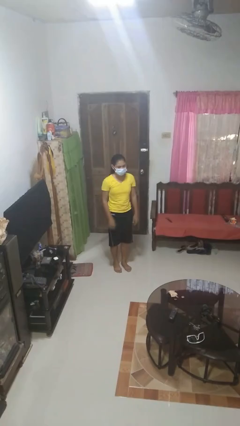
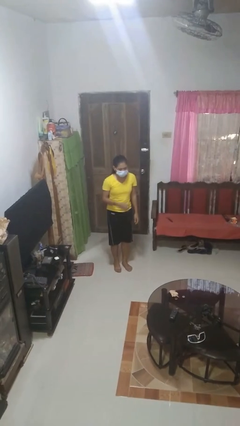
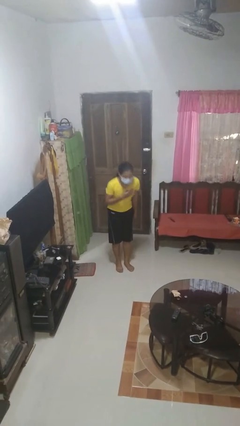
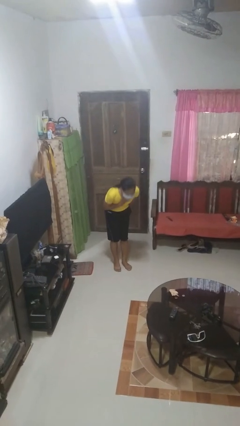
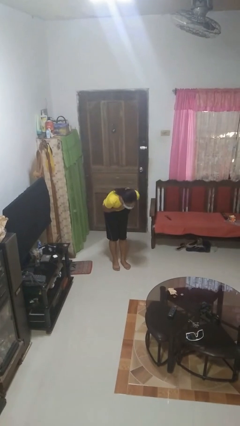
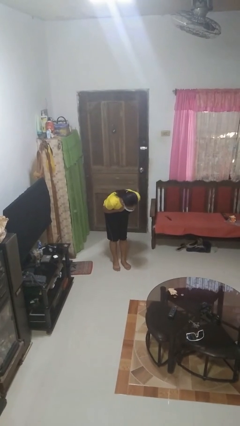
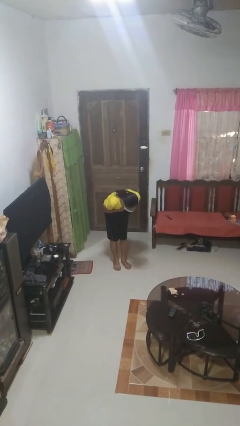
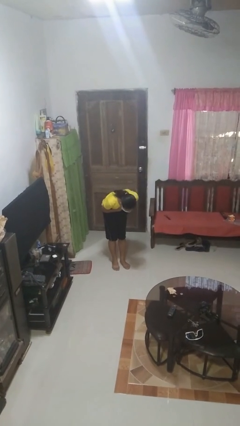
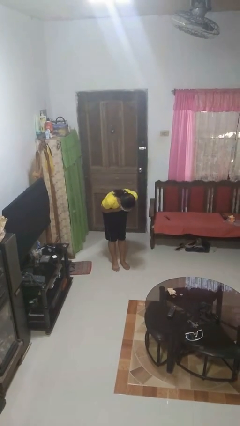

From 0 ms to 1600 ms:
person bows

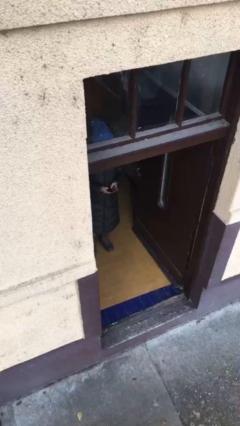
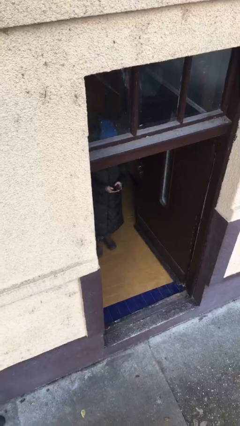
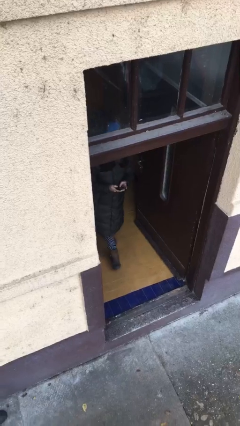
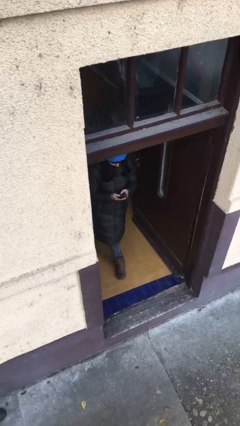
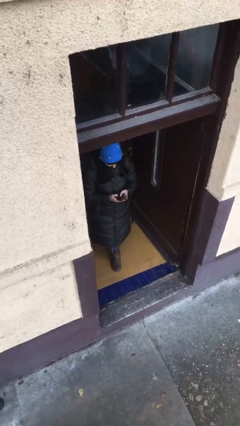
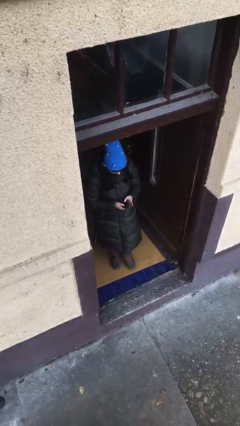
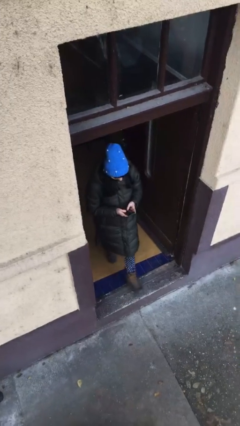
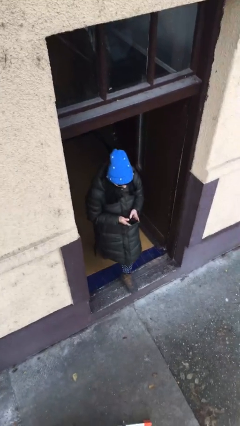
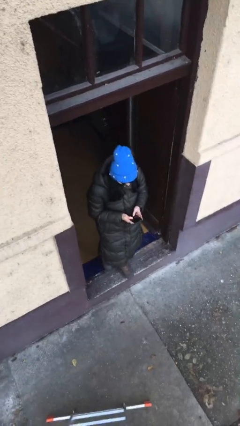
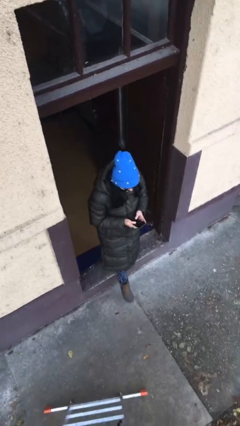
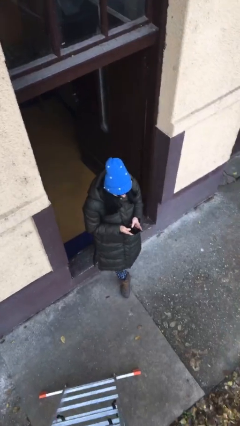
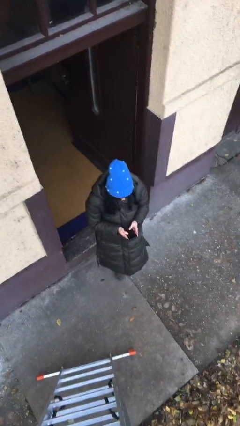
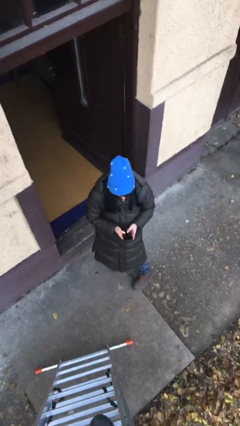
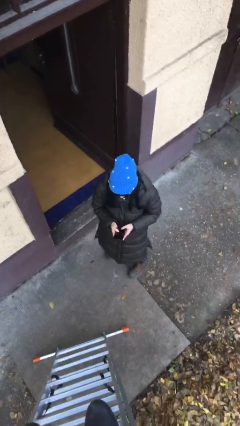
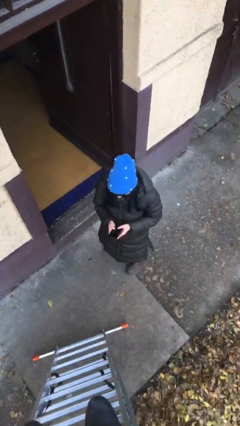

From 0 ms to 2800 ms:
person enters scene through structure

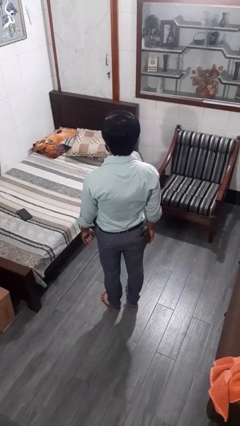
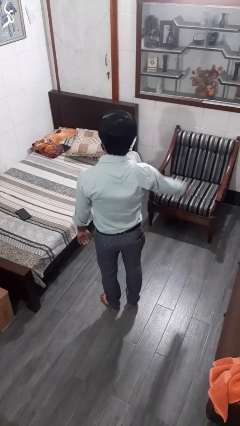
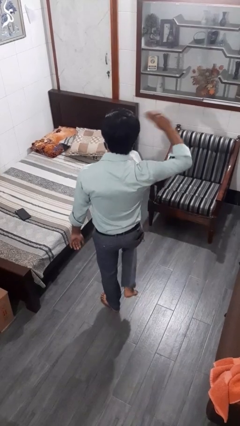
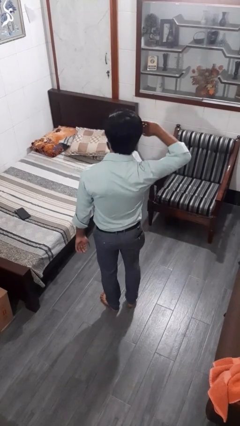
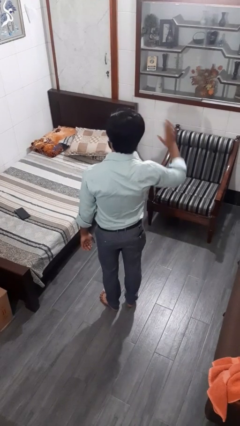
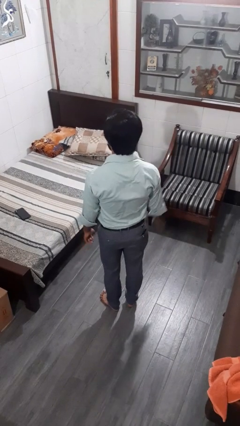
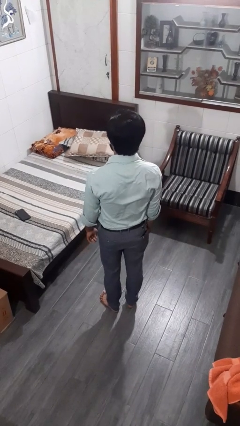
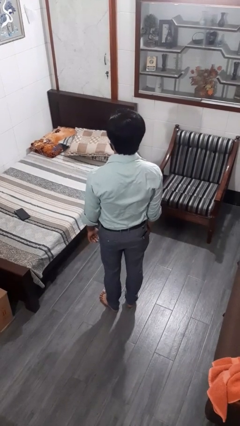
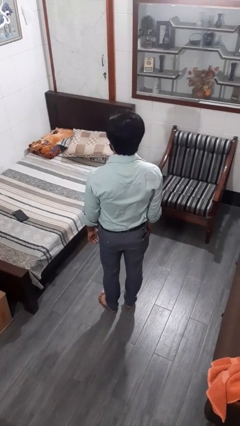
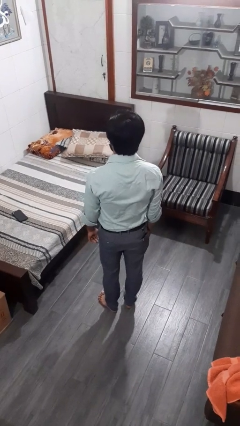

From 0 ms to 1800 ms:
person salutes

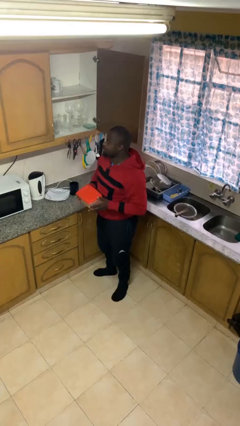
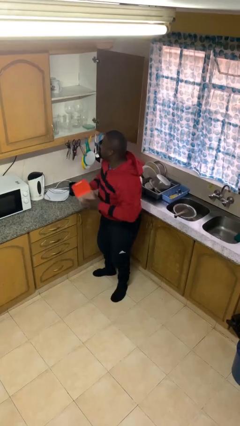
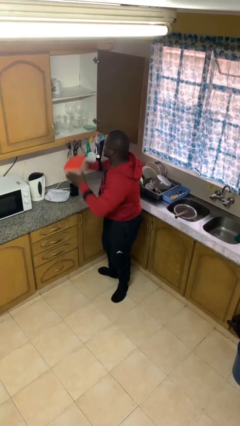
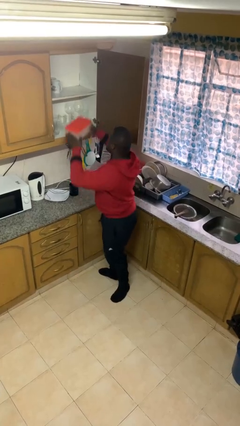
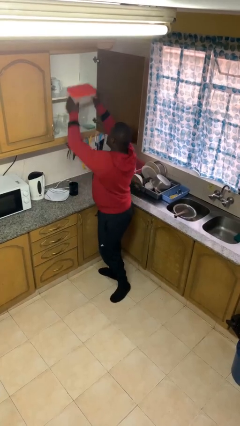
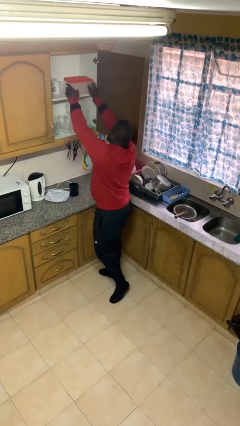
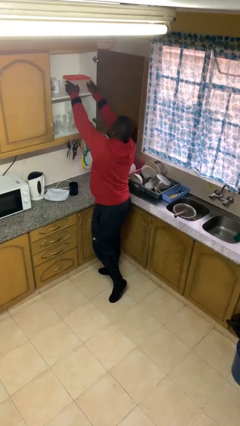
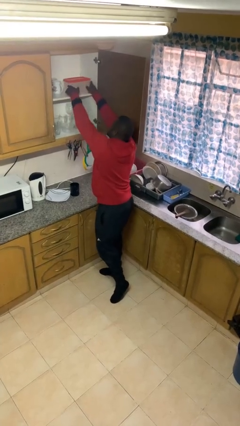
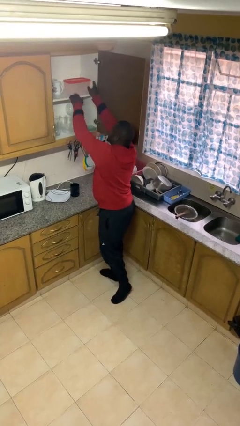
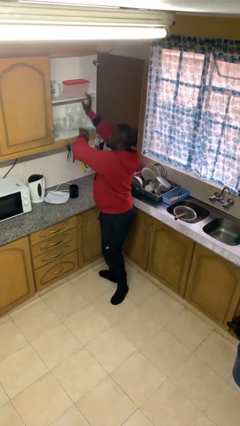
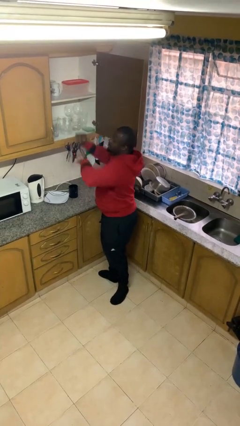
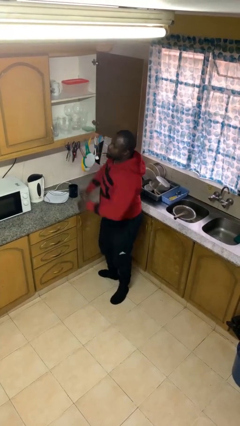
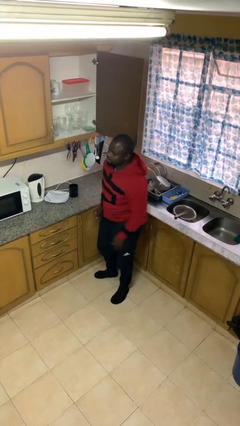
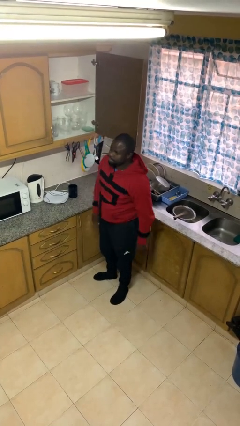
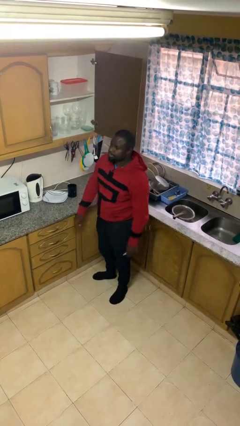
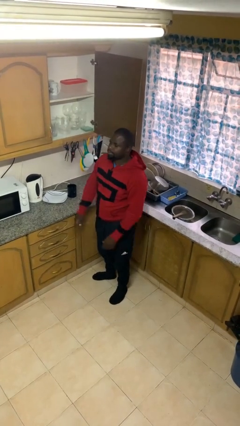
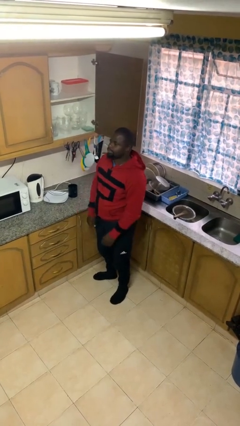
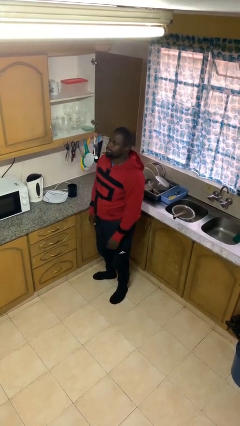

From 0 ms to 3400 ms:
person puts down object into cabinet

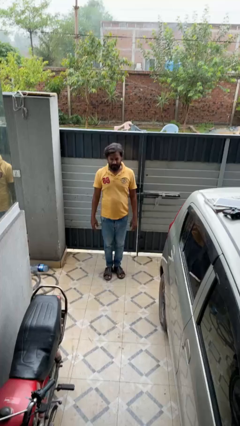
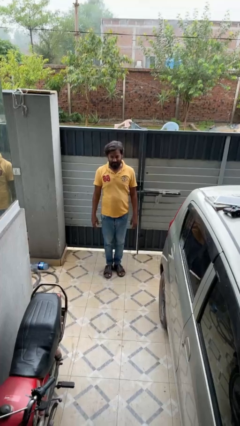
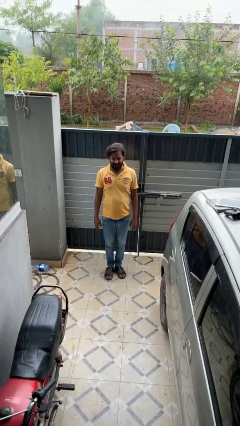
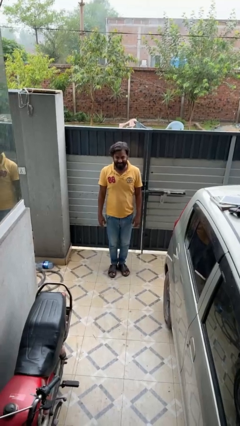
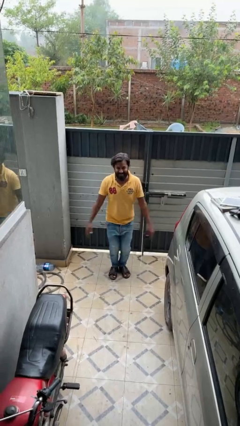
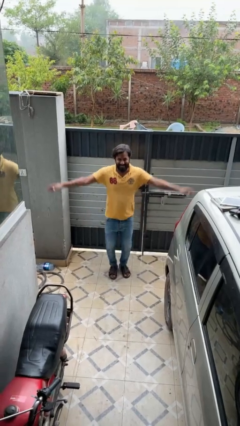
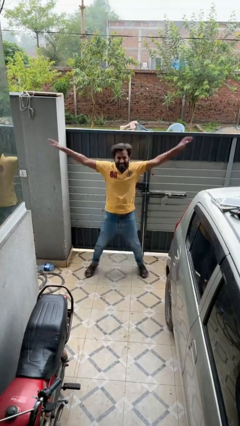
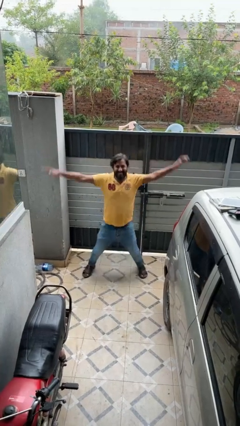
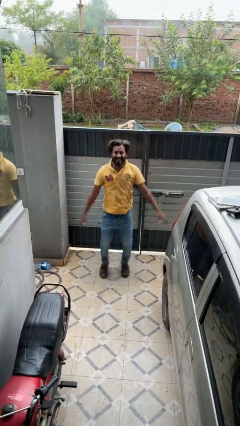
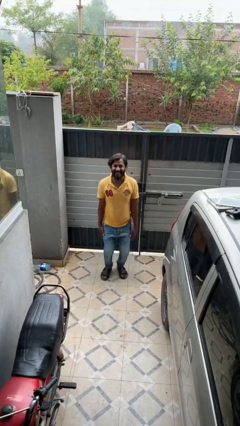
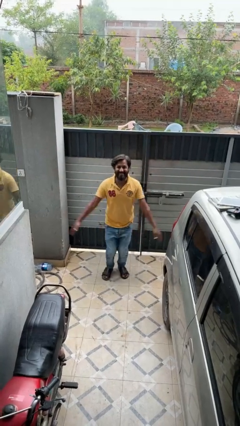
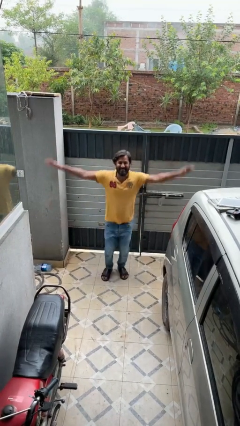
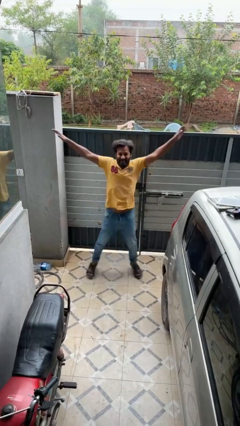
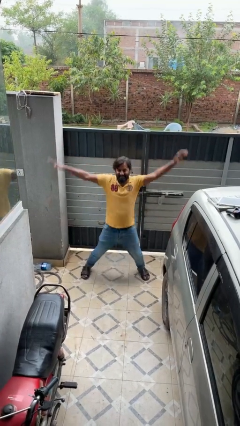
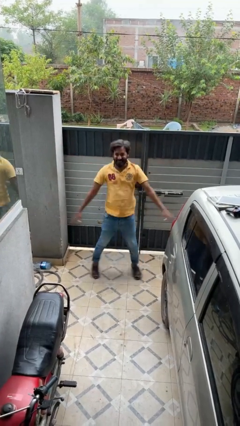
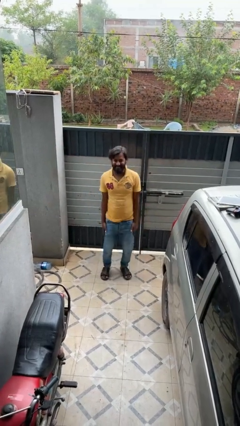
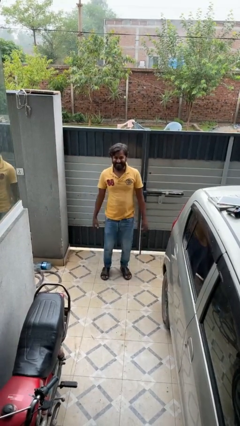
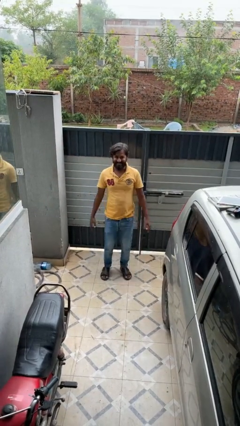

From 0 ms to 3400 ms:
person exercises with jumping jacks

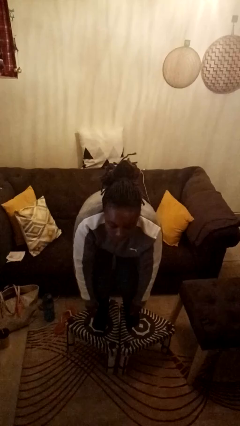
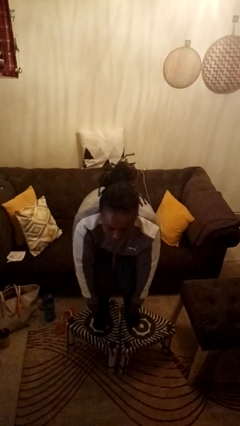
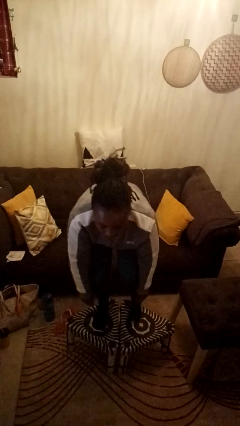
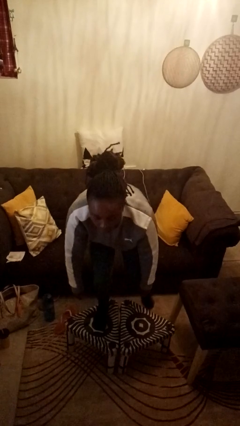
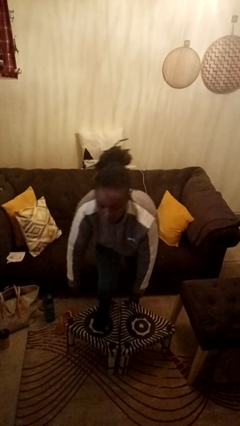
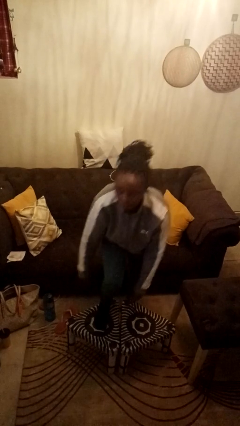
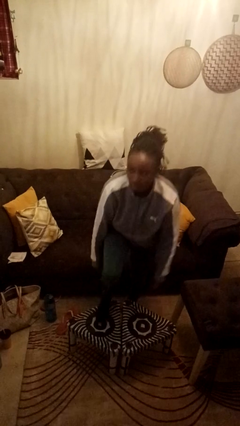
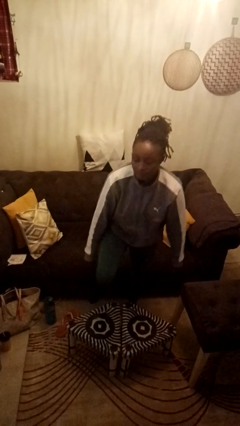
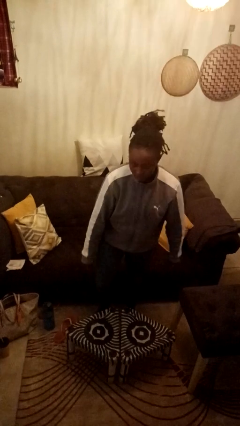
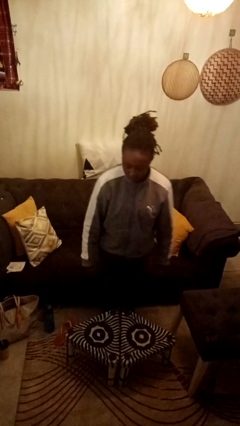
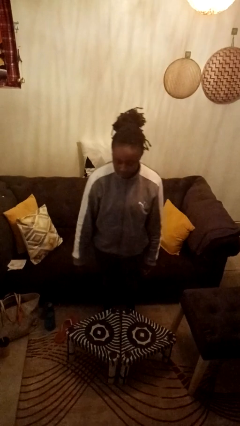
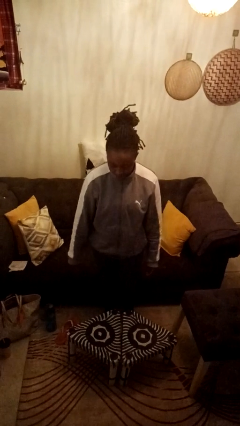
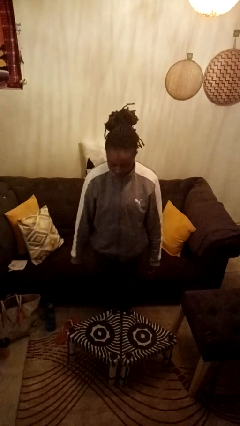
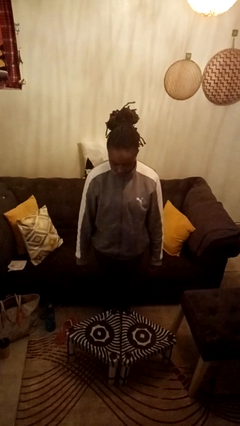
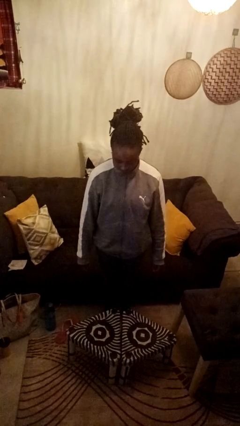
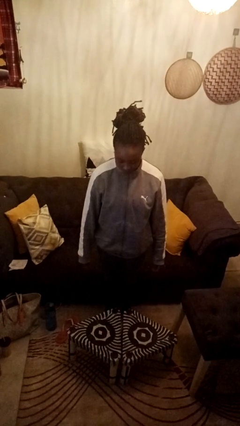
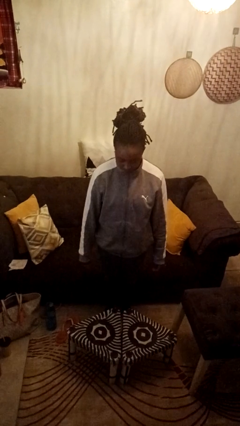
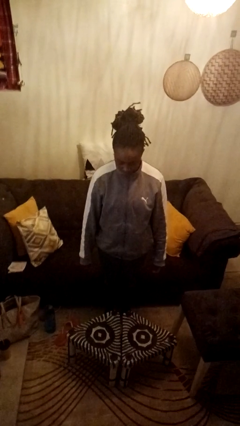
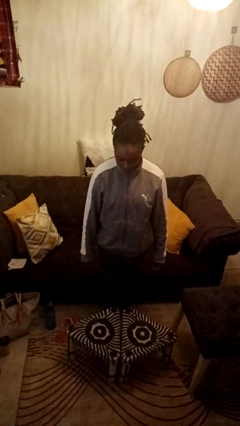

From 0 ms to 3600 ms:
person climbs off table

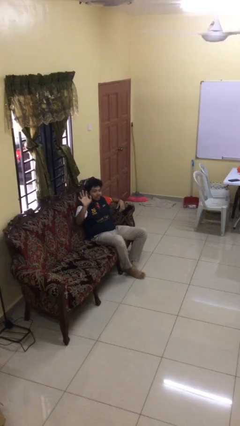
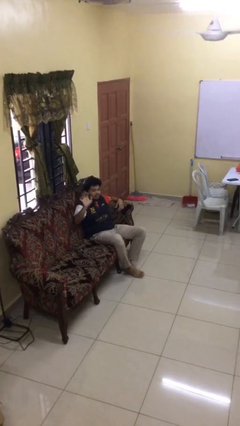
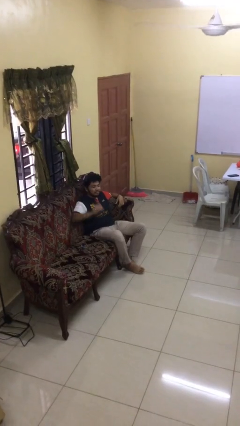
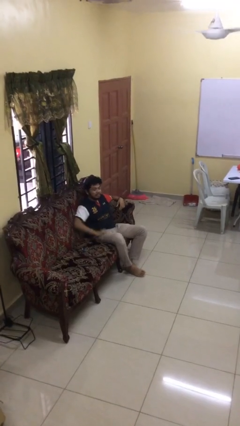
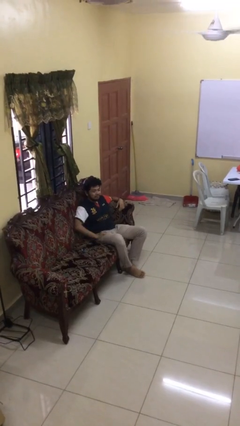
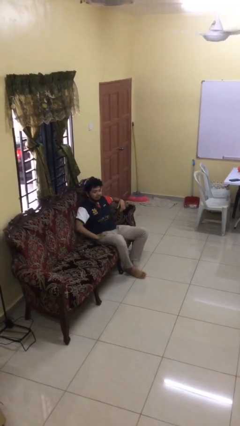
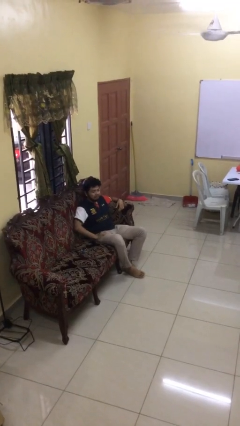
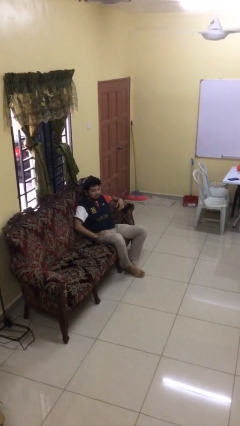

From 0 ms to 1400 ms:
person gestures swipe right
